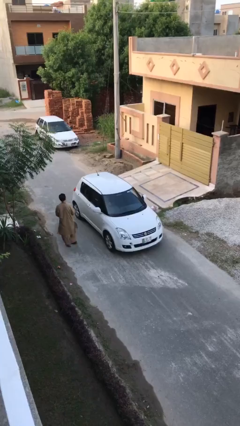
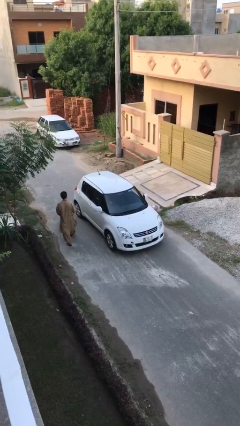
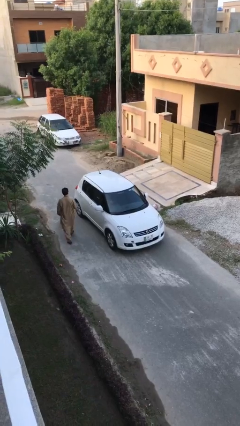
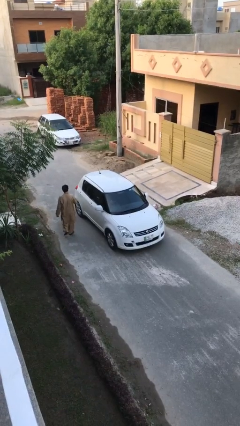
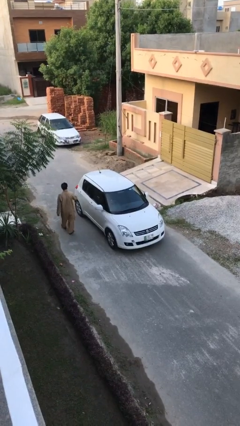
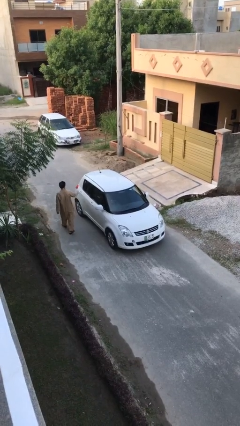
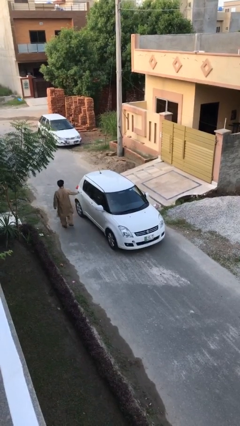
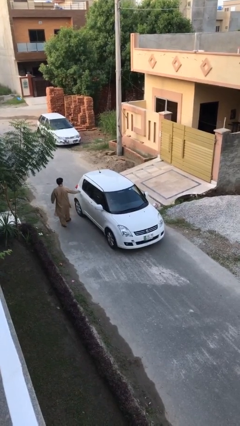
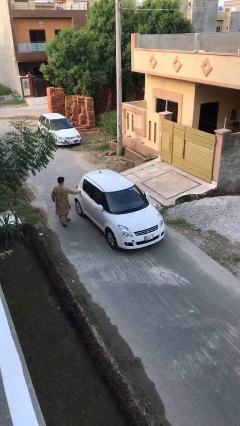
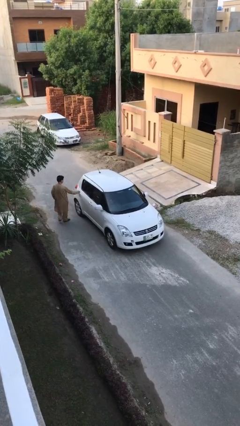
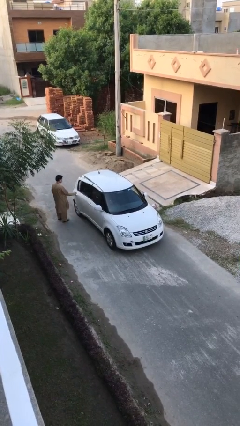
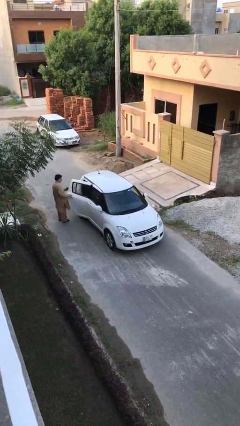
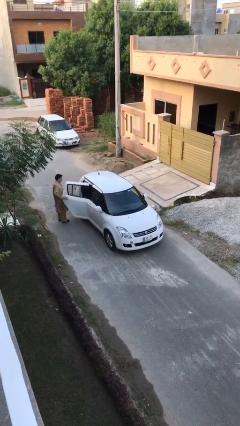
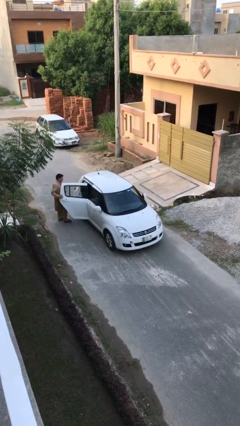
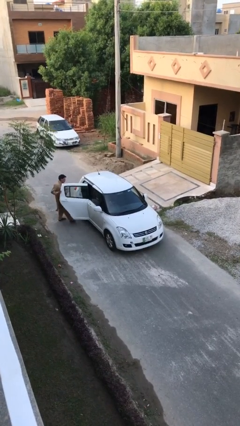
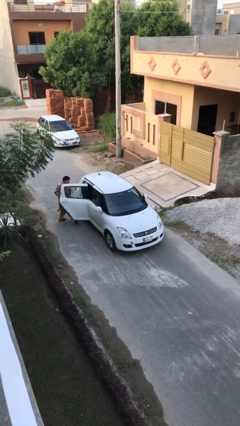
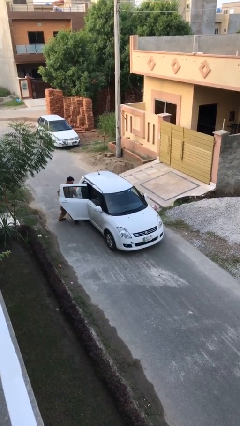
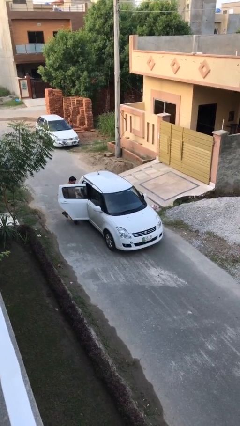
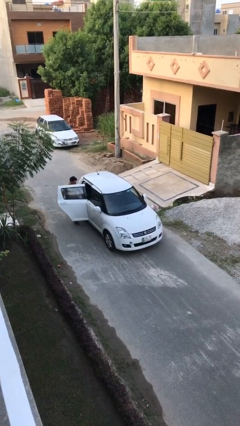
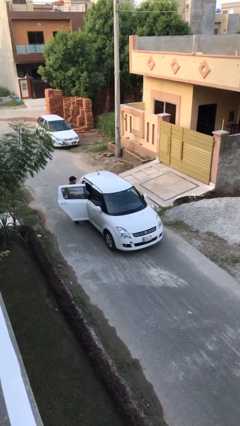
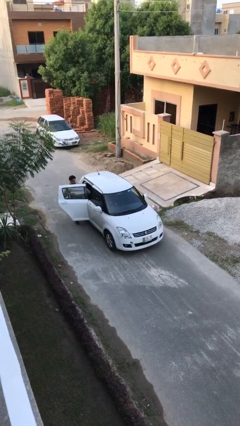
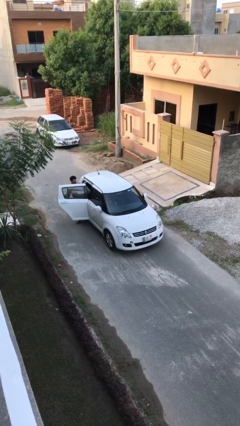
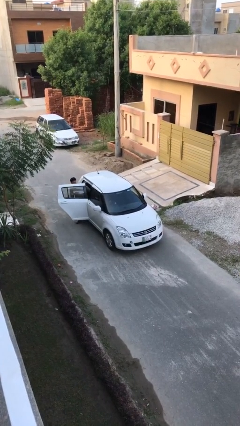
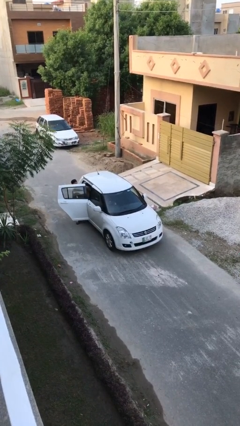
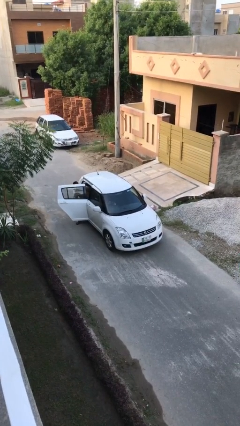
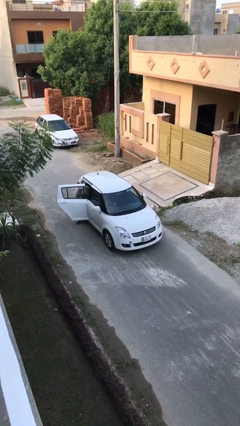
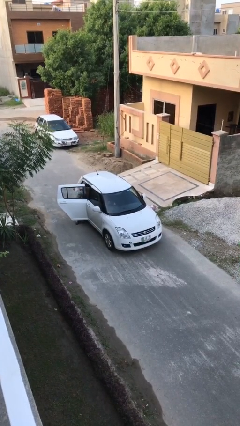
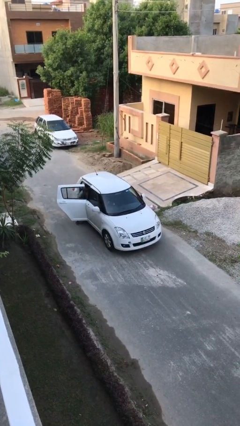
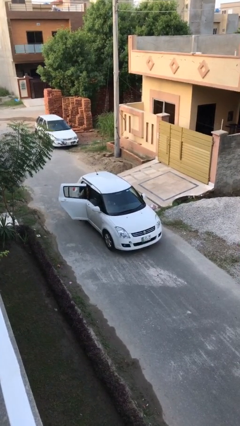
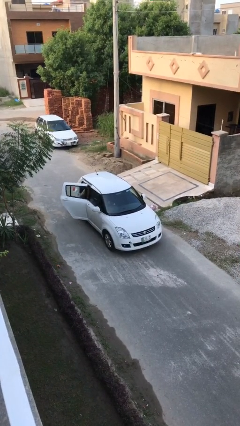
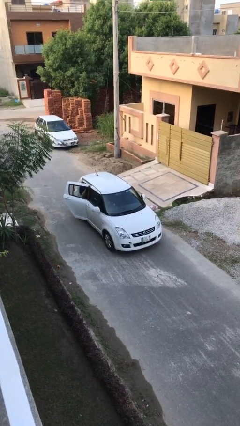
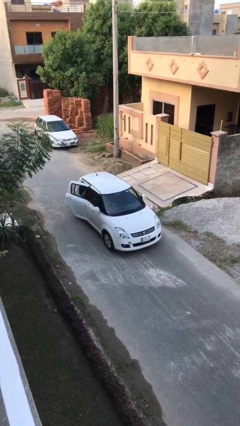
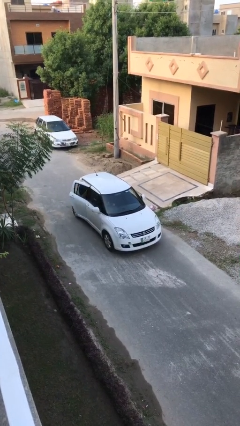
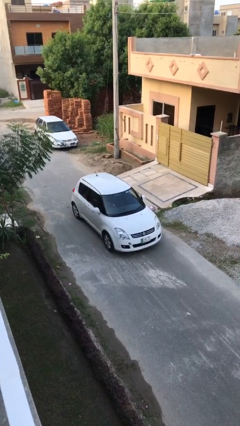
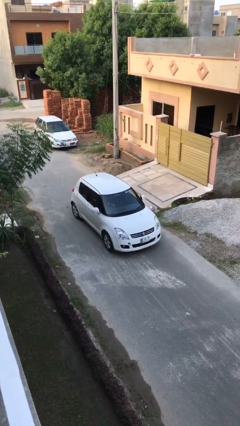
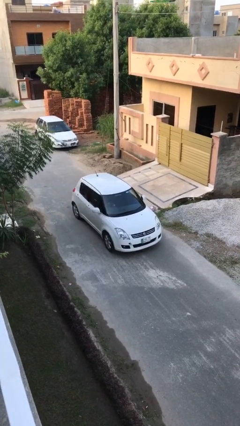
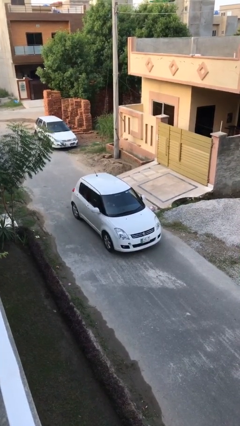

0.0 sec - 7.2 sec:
car picks up person

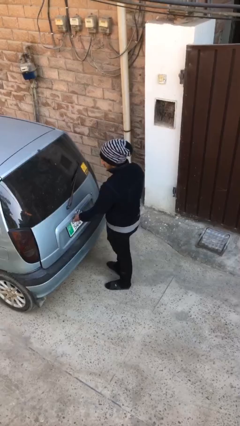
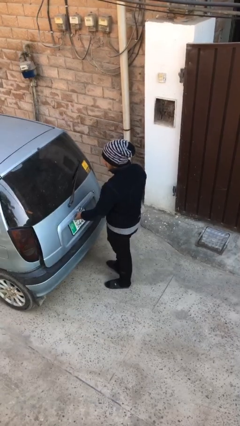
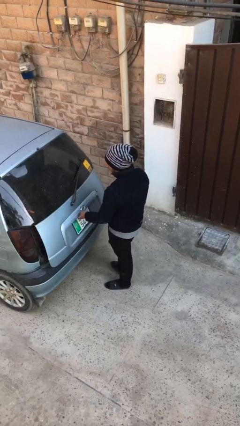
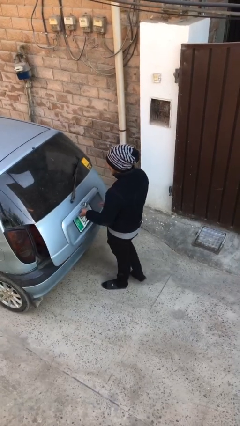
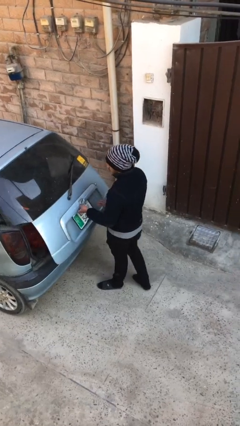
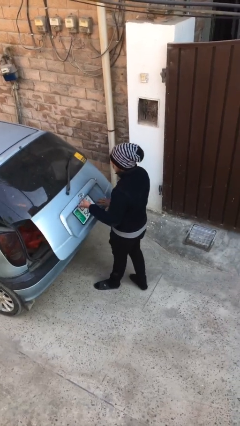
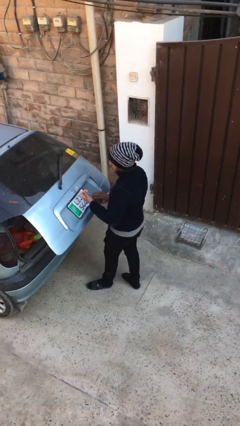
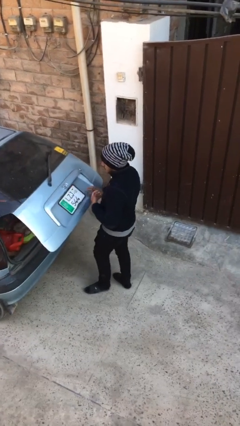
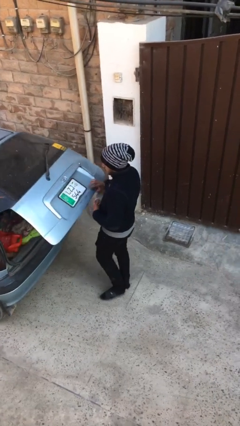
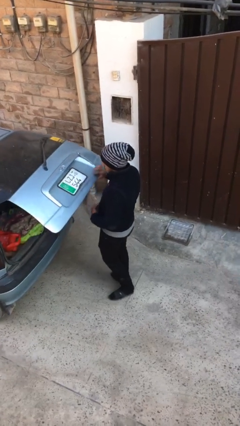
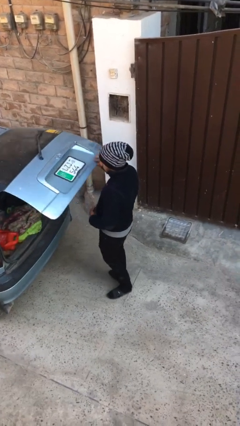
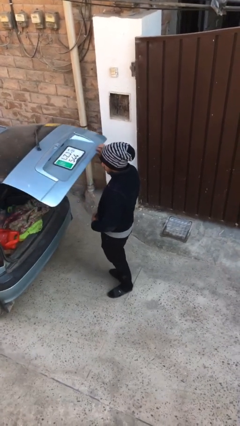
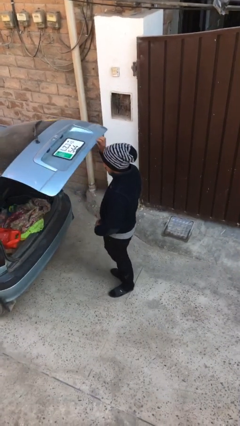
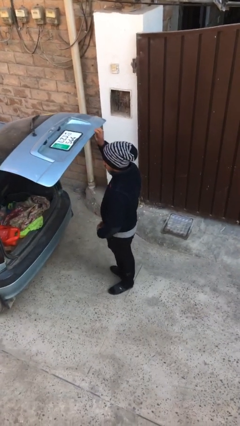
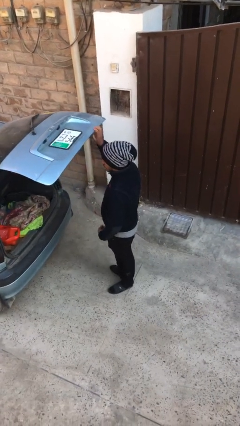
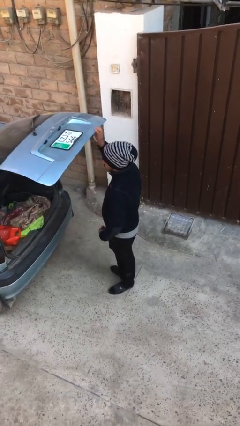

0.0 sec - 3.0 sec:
person opens car trunk

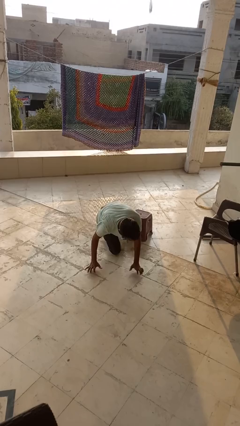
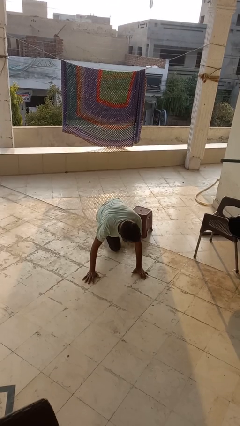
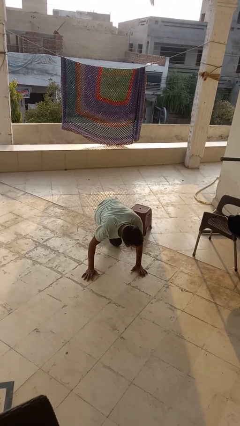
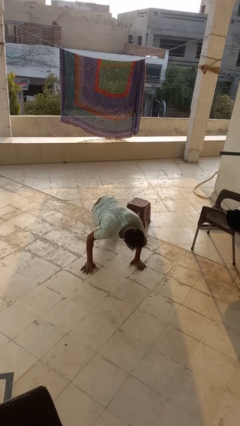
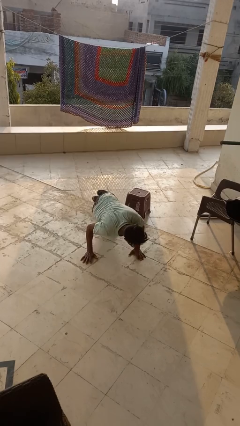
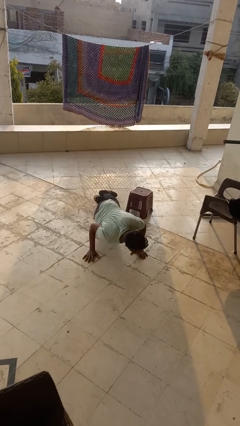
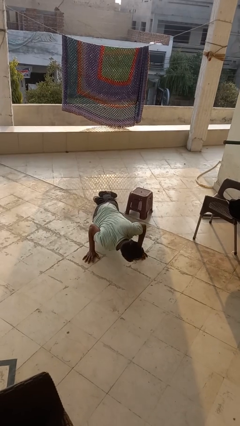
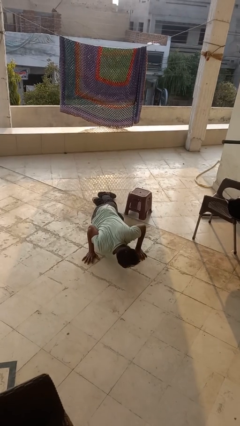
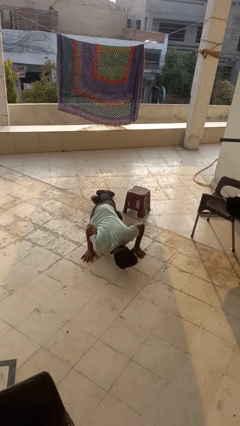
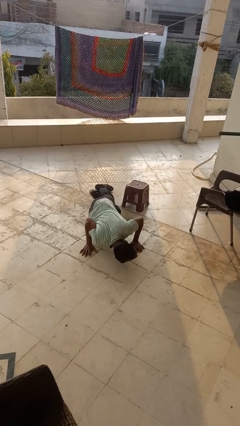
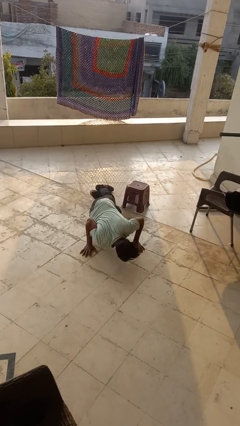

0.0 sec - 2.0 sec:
person lies down on floor

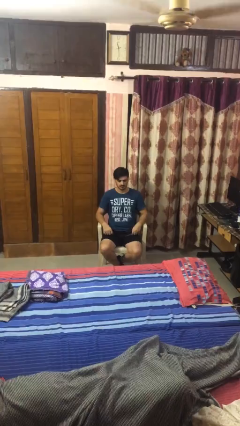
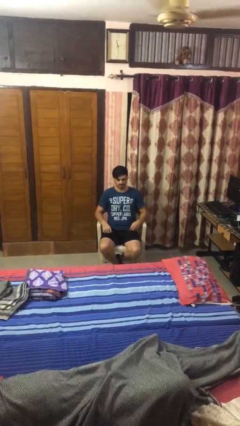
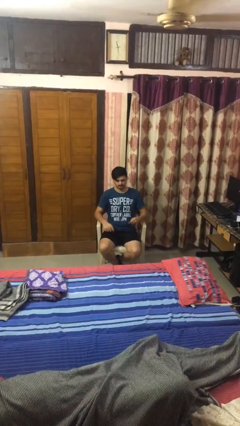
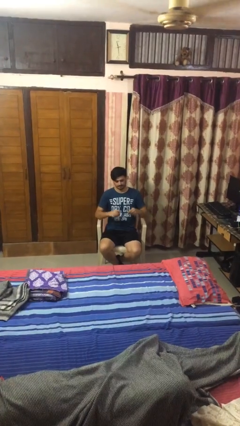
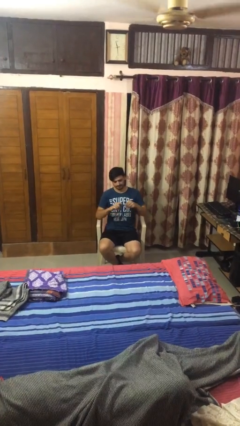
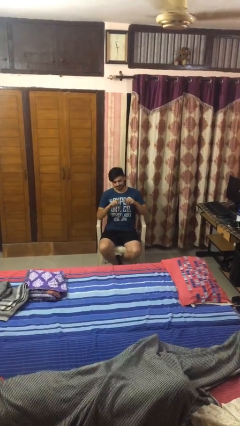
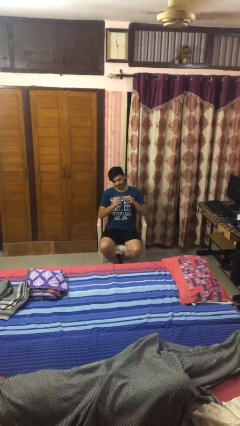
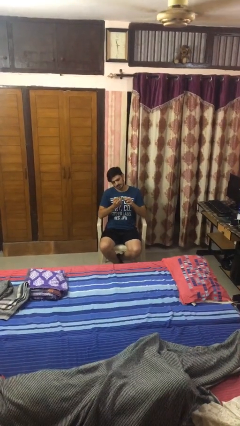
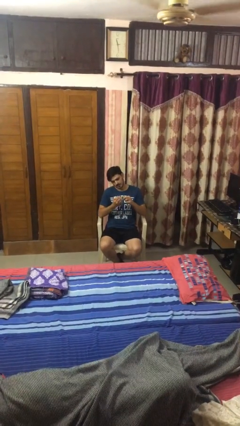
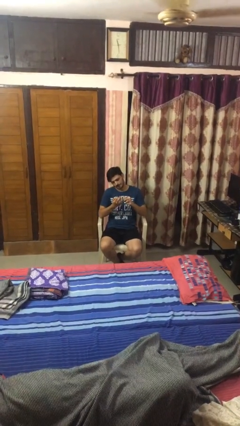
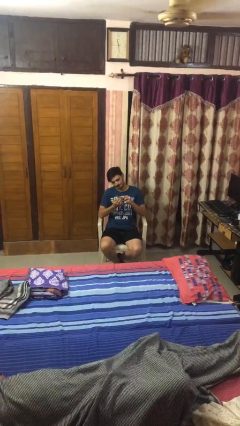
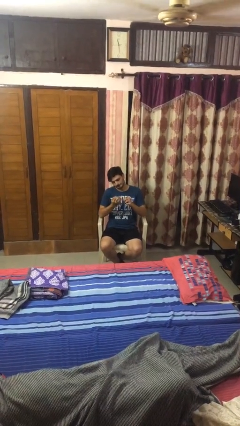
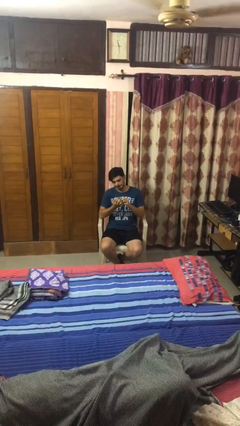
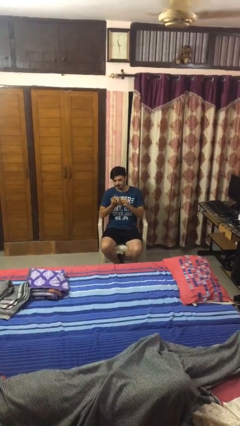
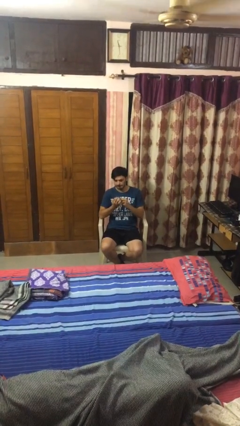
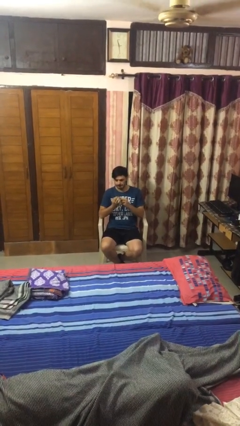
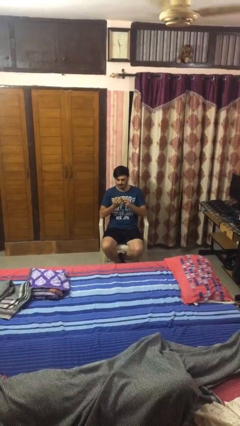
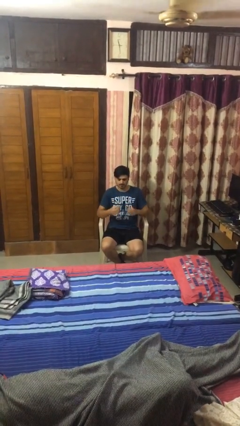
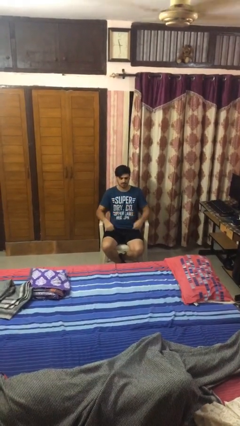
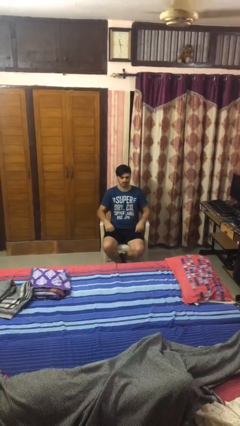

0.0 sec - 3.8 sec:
person files fingernails

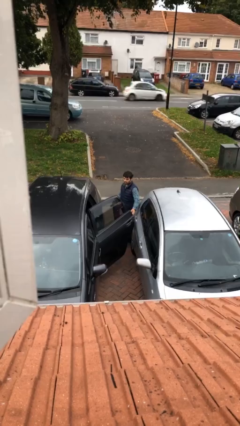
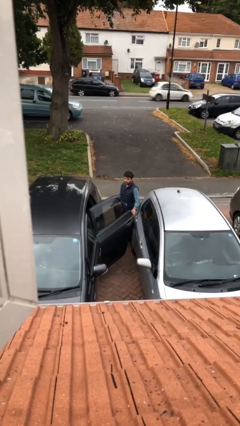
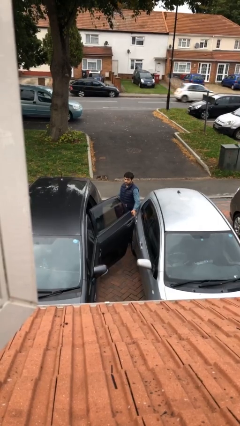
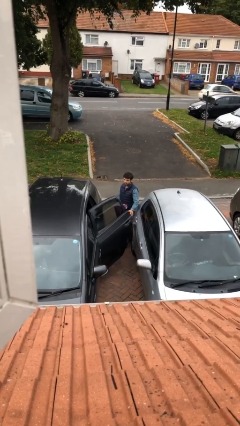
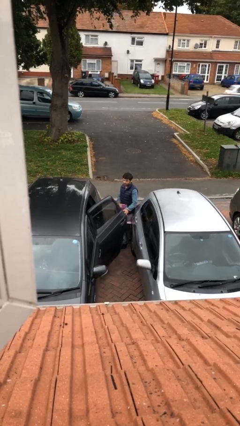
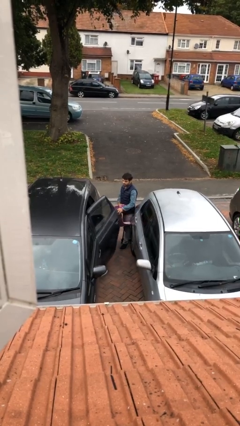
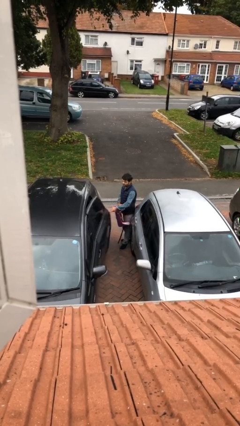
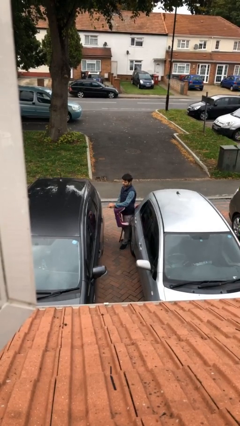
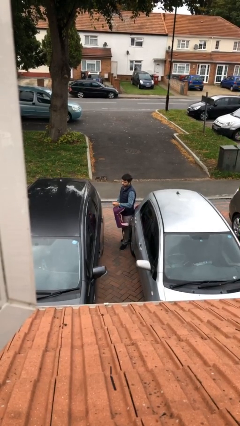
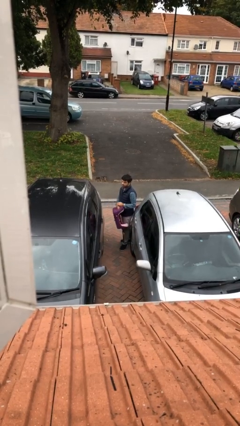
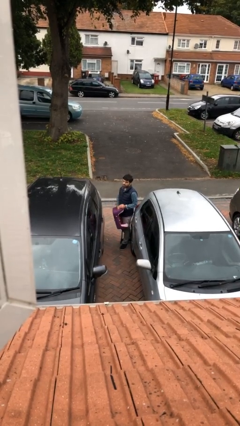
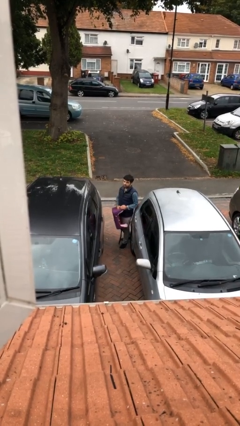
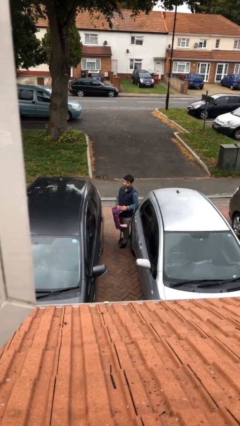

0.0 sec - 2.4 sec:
person closes car door
